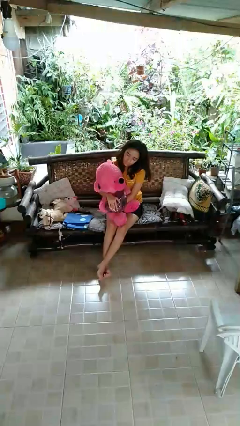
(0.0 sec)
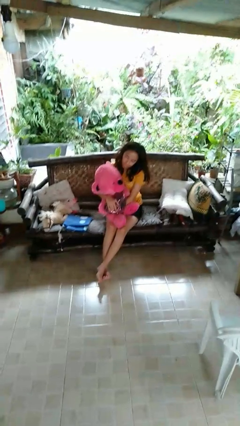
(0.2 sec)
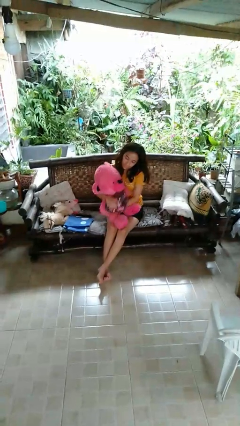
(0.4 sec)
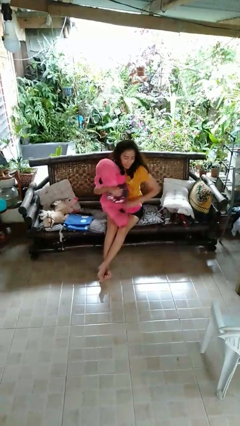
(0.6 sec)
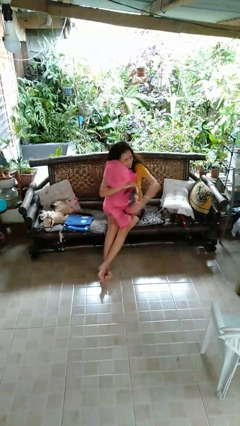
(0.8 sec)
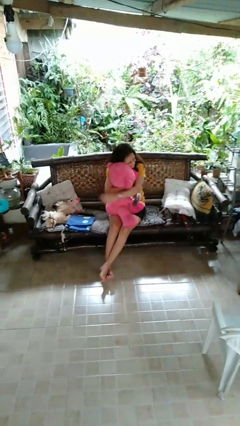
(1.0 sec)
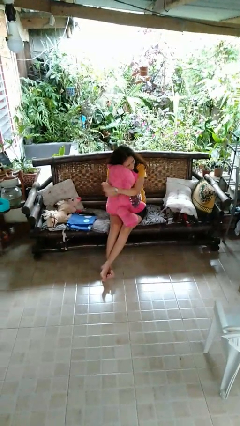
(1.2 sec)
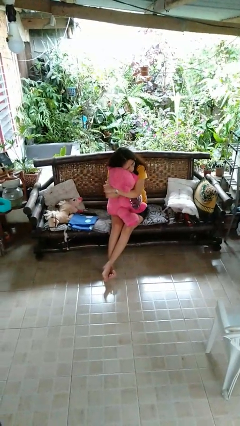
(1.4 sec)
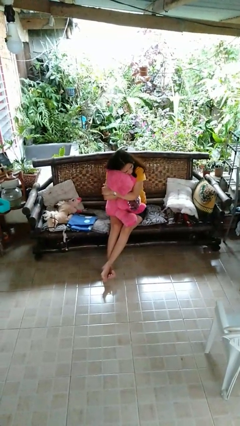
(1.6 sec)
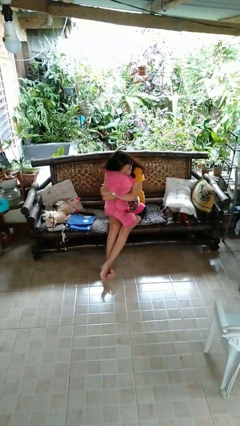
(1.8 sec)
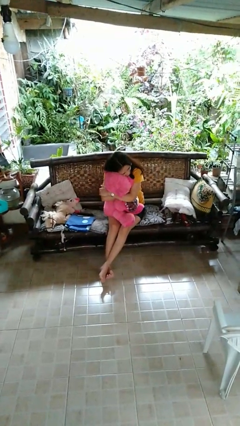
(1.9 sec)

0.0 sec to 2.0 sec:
person hugs stuffed animal

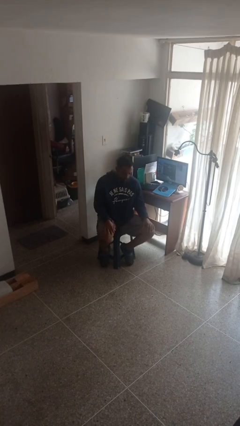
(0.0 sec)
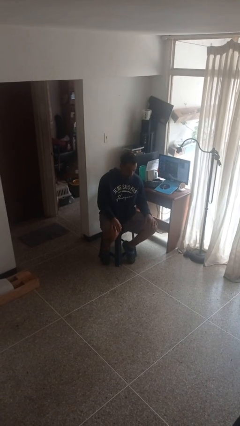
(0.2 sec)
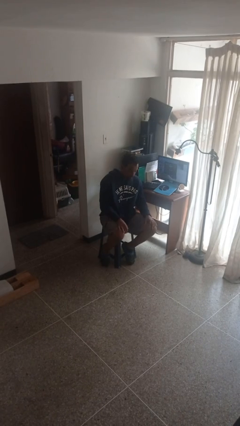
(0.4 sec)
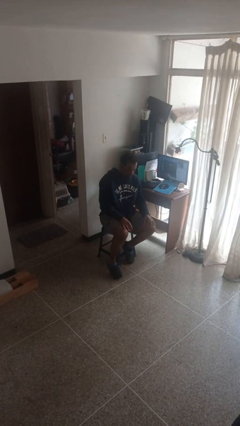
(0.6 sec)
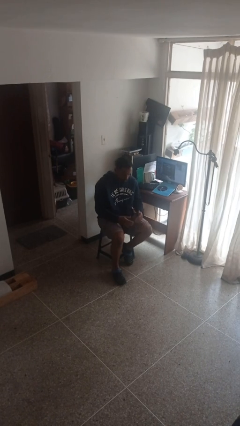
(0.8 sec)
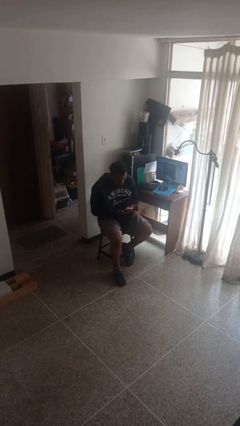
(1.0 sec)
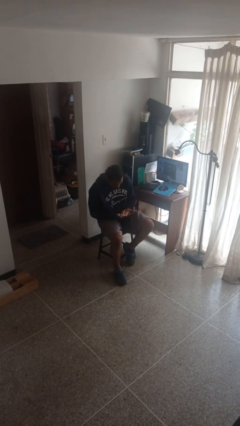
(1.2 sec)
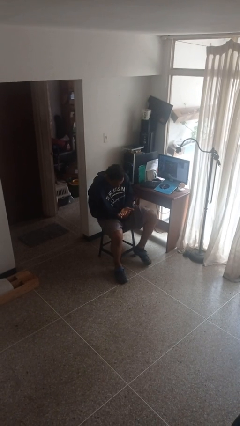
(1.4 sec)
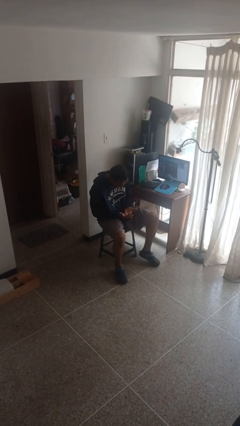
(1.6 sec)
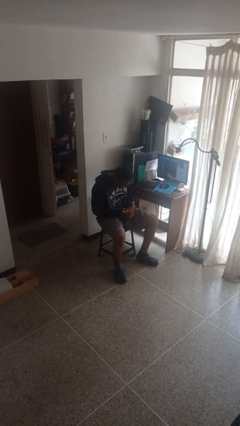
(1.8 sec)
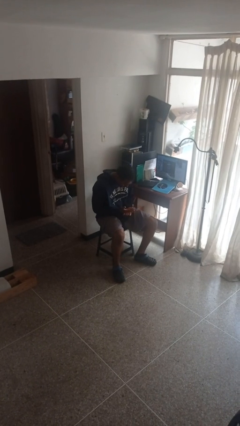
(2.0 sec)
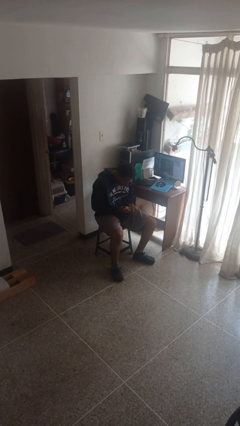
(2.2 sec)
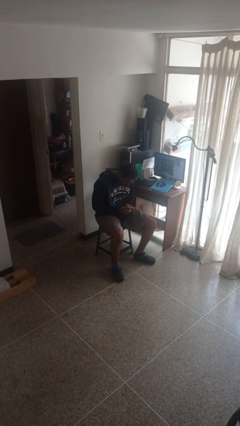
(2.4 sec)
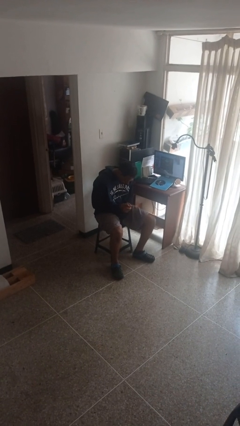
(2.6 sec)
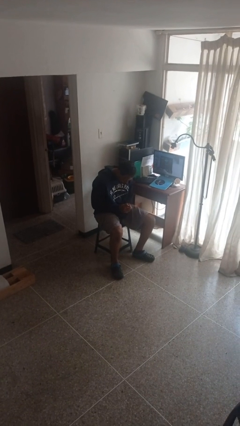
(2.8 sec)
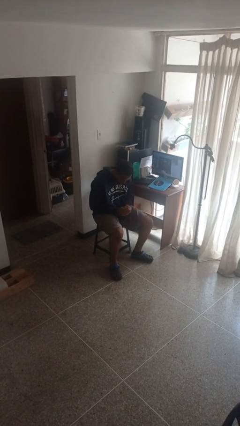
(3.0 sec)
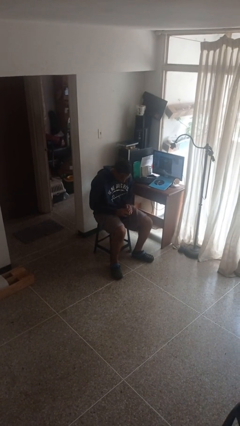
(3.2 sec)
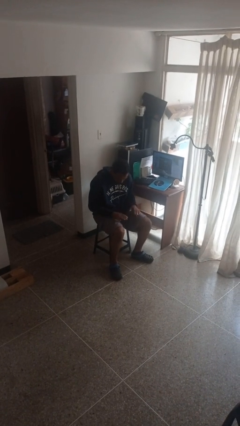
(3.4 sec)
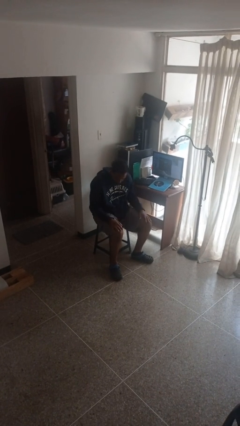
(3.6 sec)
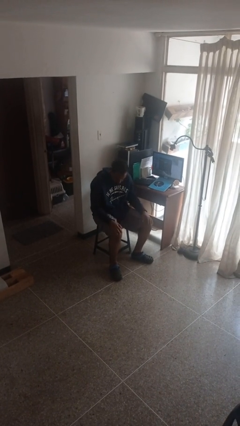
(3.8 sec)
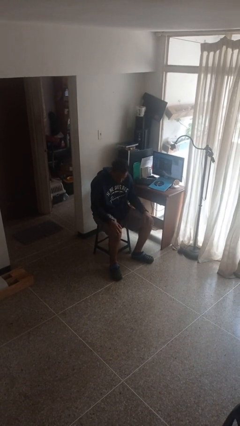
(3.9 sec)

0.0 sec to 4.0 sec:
person looks at hands in lap

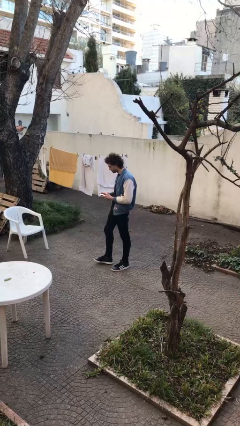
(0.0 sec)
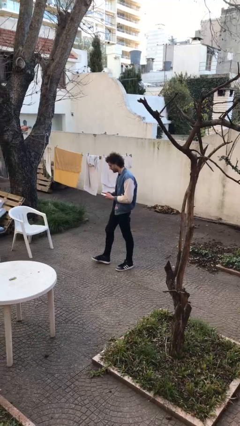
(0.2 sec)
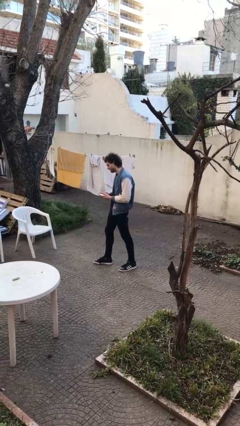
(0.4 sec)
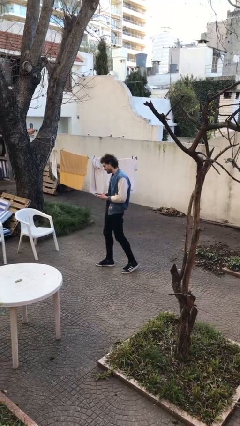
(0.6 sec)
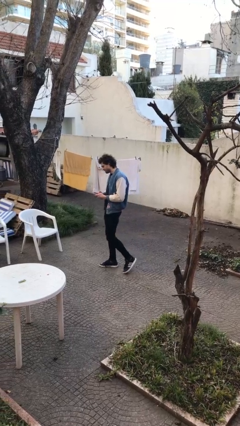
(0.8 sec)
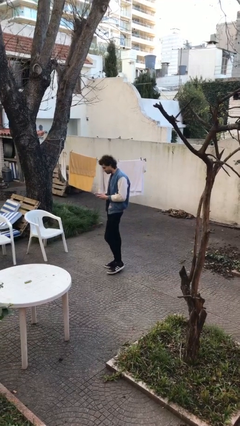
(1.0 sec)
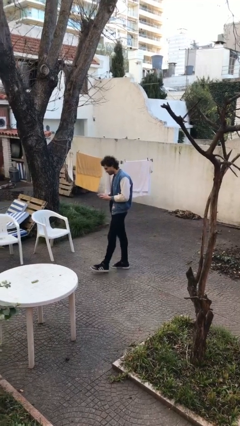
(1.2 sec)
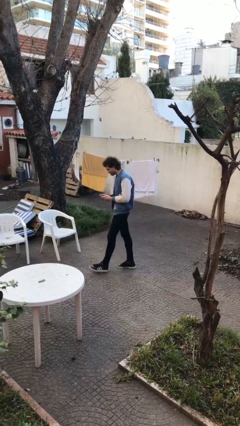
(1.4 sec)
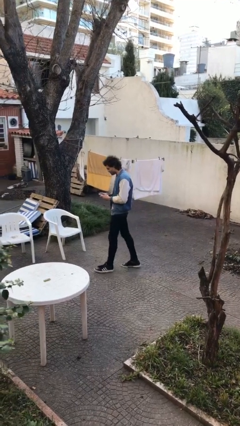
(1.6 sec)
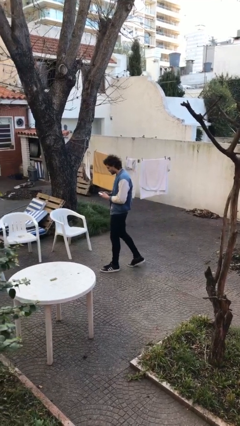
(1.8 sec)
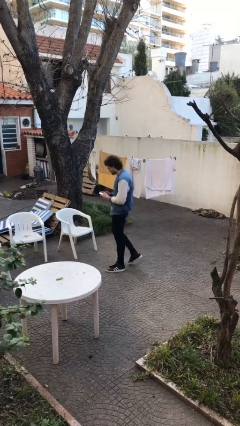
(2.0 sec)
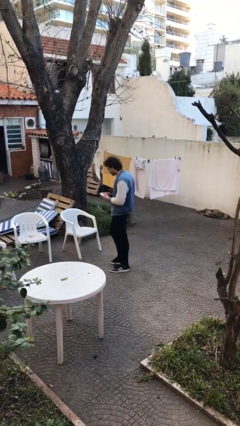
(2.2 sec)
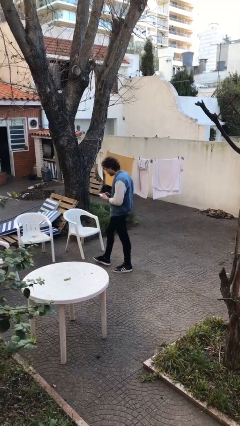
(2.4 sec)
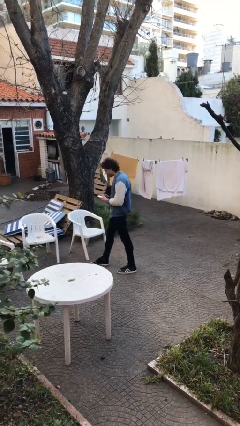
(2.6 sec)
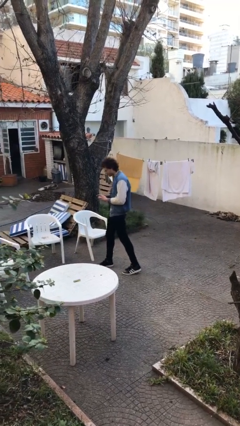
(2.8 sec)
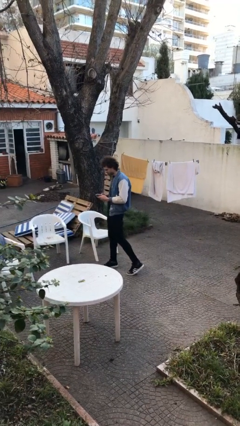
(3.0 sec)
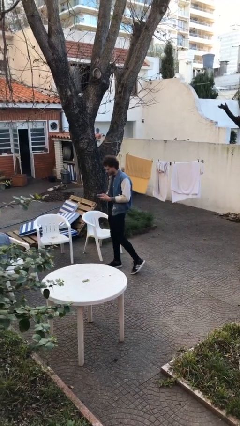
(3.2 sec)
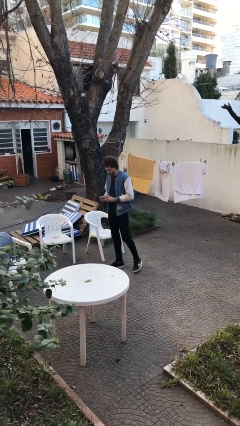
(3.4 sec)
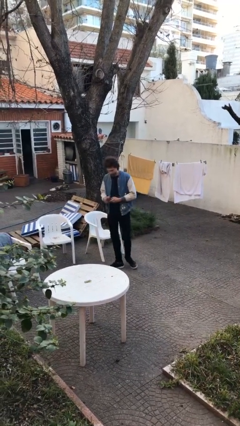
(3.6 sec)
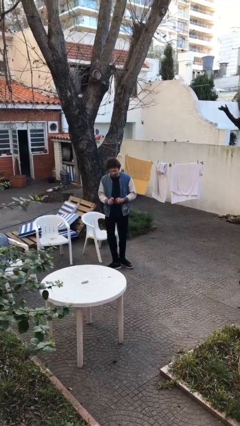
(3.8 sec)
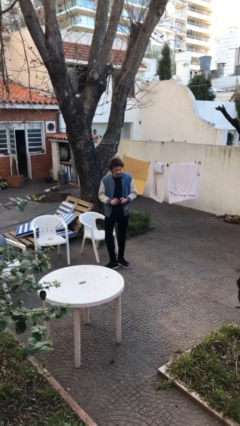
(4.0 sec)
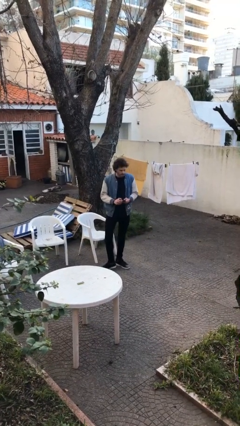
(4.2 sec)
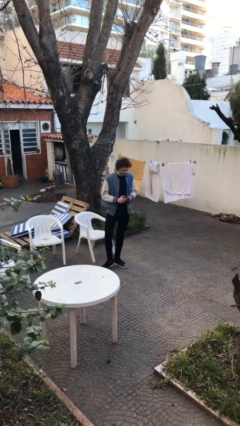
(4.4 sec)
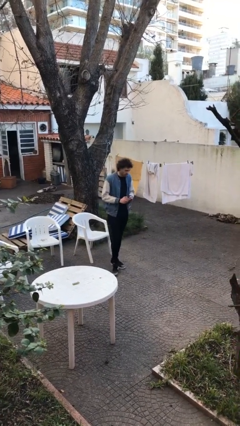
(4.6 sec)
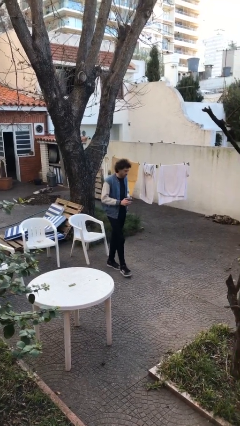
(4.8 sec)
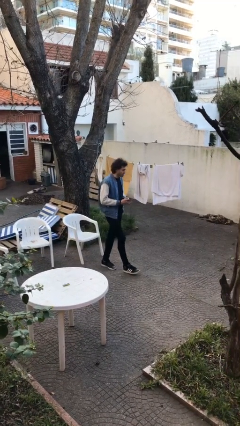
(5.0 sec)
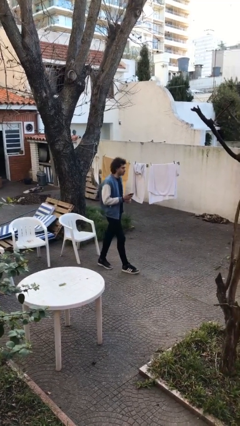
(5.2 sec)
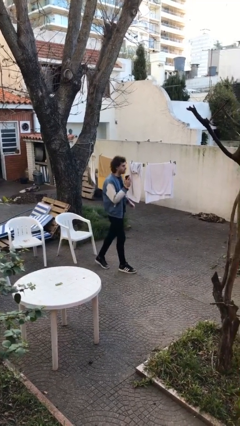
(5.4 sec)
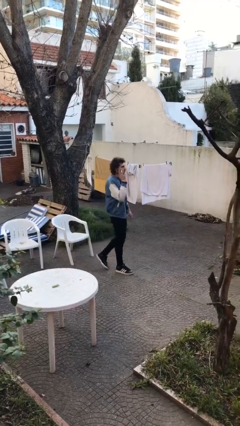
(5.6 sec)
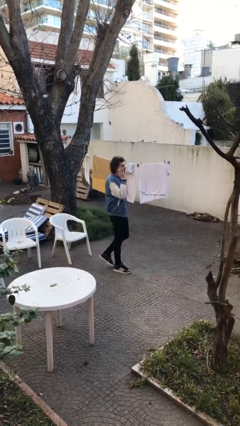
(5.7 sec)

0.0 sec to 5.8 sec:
person texts on phone

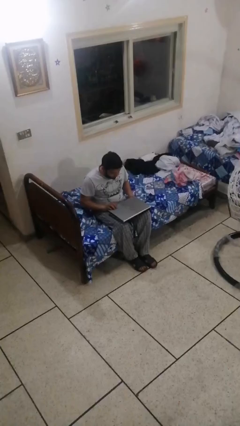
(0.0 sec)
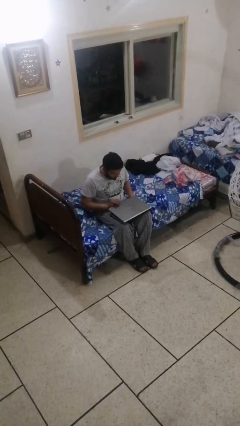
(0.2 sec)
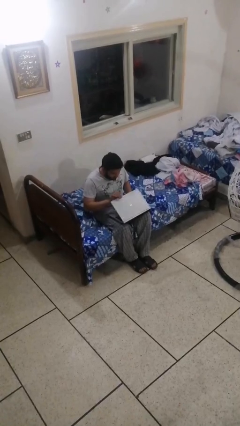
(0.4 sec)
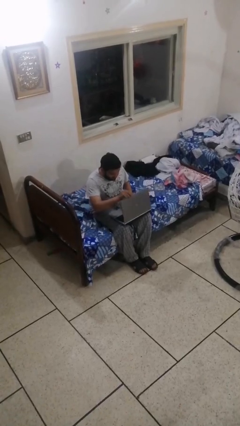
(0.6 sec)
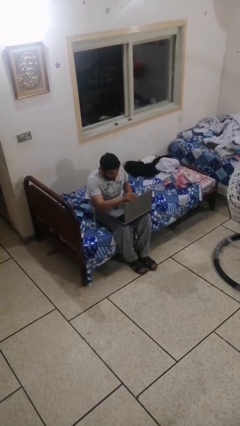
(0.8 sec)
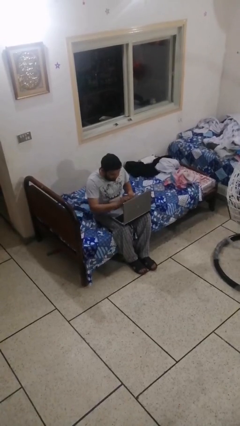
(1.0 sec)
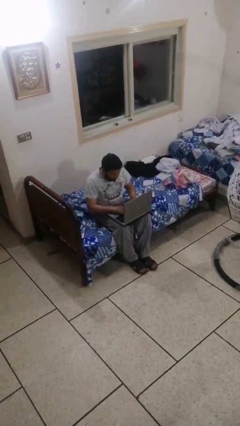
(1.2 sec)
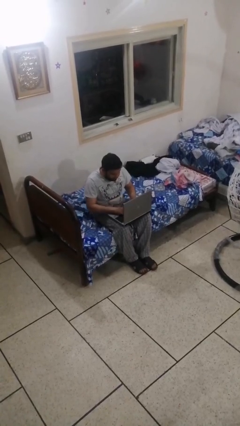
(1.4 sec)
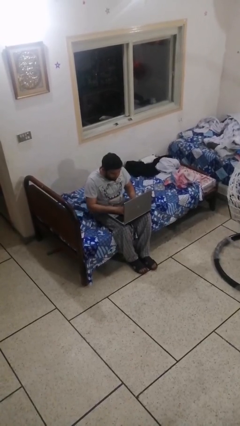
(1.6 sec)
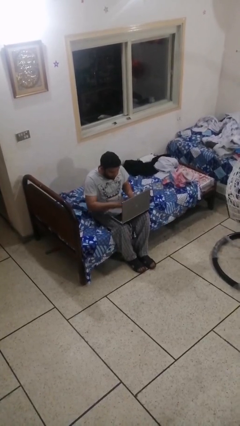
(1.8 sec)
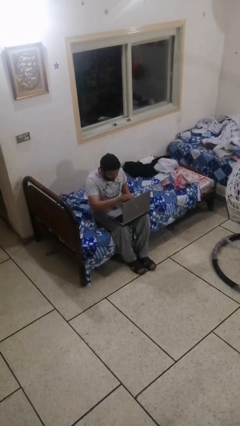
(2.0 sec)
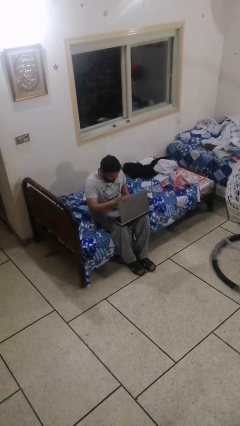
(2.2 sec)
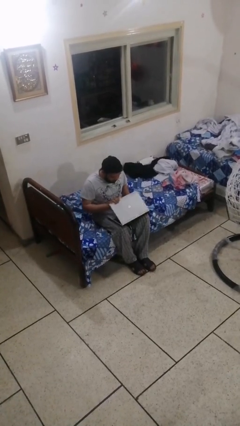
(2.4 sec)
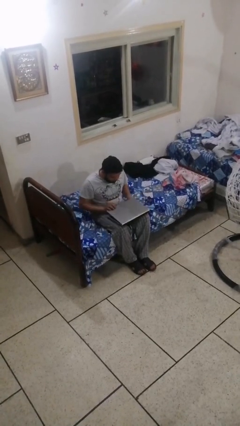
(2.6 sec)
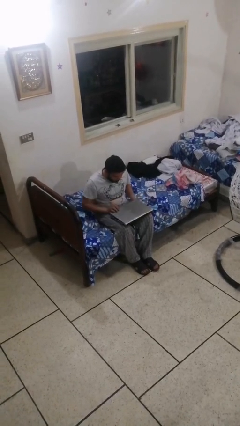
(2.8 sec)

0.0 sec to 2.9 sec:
person interacts with laptop

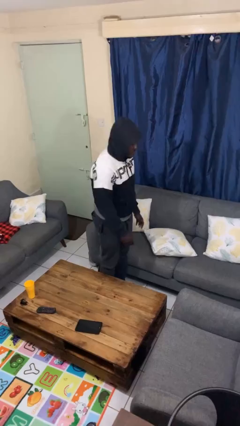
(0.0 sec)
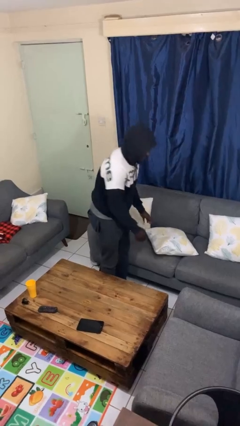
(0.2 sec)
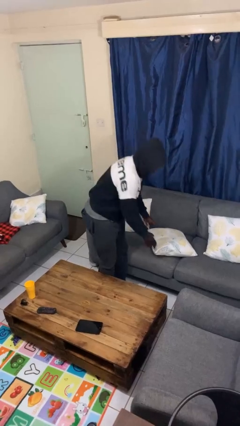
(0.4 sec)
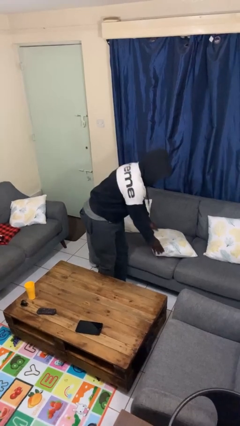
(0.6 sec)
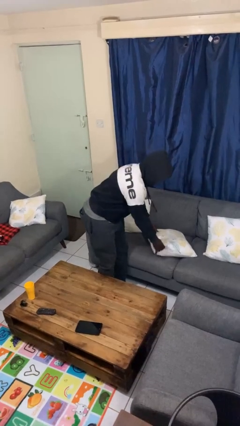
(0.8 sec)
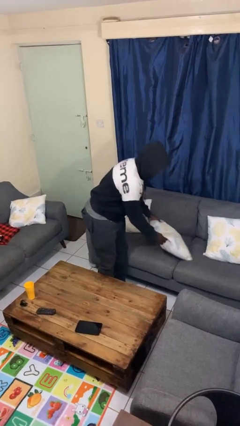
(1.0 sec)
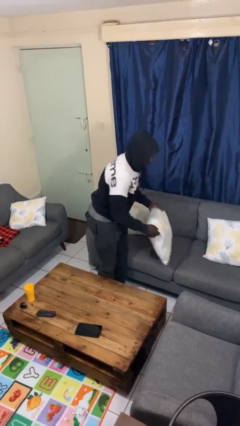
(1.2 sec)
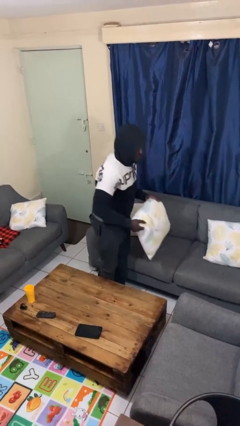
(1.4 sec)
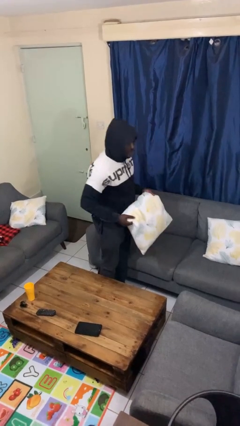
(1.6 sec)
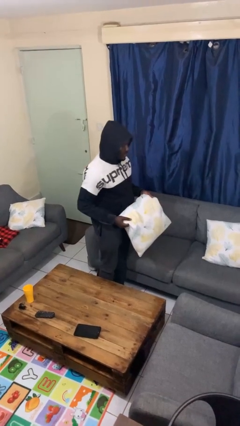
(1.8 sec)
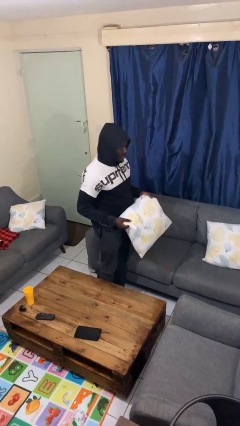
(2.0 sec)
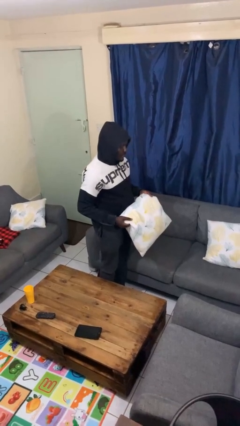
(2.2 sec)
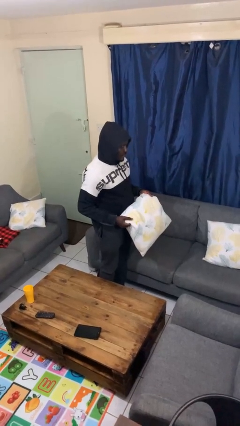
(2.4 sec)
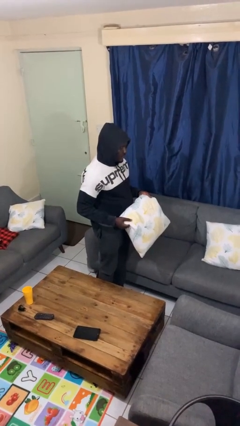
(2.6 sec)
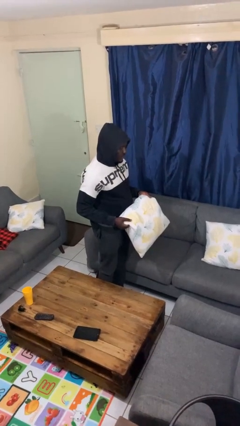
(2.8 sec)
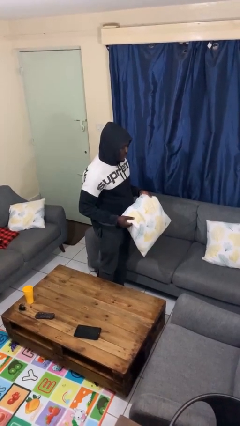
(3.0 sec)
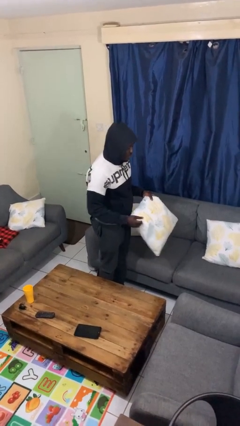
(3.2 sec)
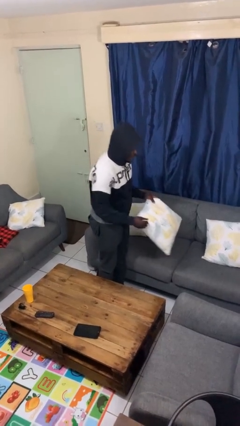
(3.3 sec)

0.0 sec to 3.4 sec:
person picks up object from couch
